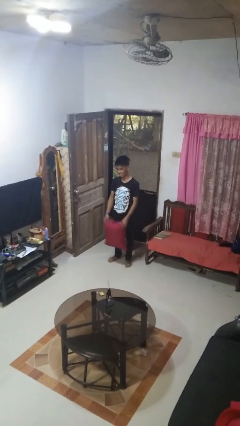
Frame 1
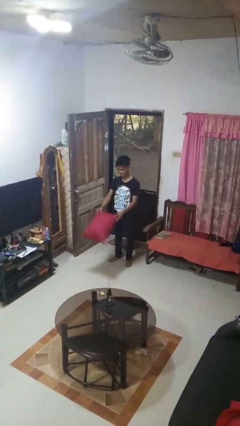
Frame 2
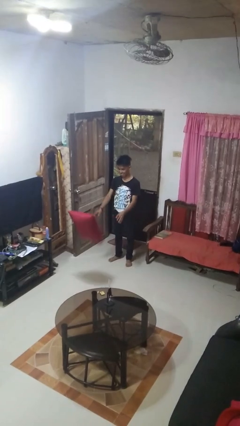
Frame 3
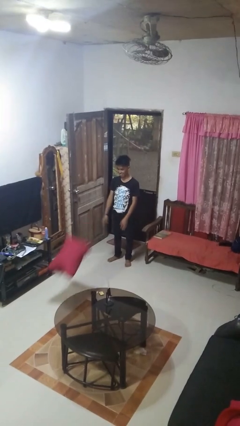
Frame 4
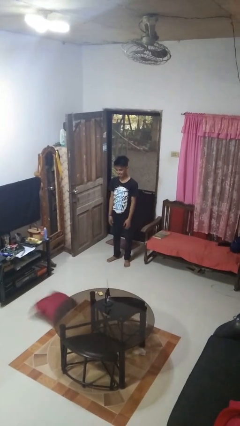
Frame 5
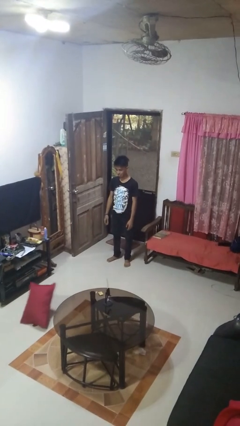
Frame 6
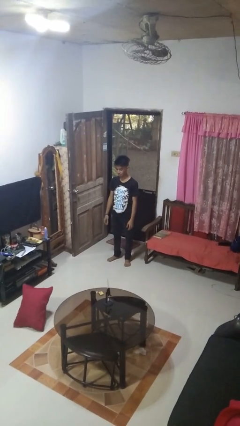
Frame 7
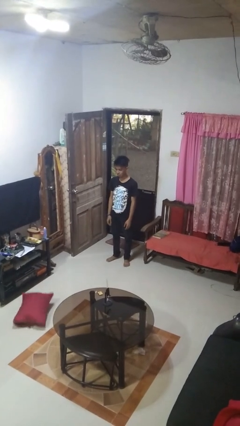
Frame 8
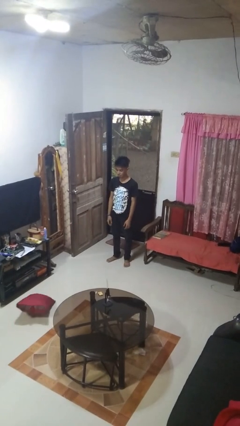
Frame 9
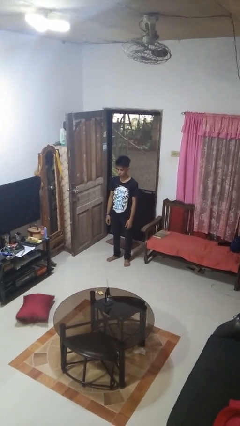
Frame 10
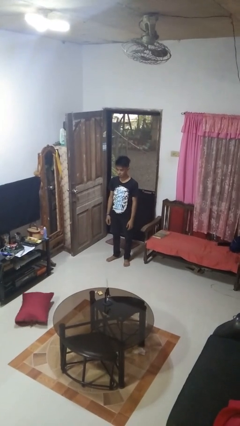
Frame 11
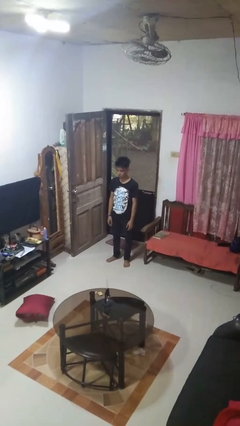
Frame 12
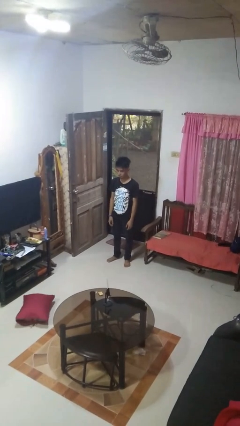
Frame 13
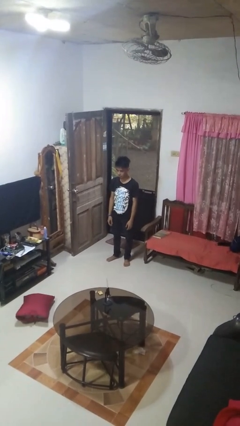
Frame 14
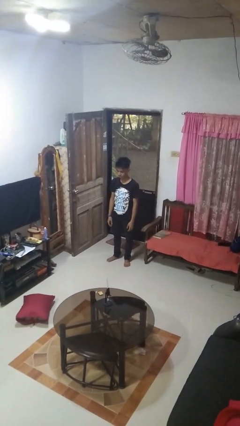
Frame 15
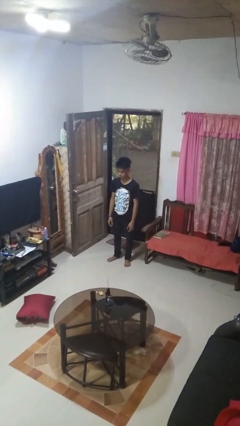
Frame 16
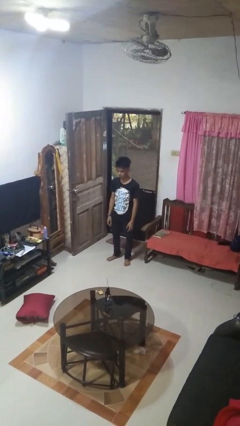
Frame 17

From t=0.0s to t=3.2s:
person throws object to ground

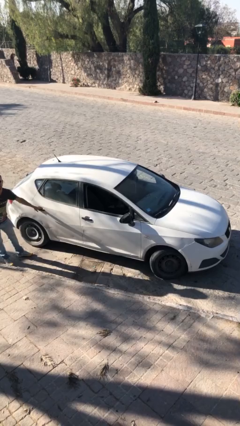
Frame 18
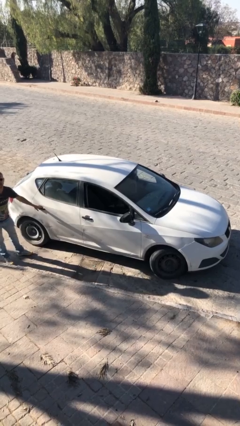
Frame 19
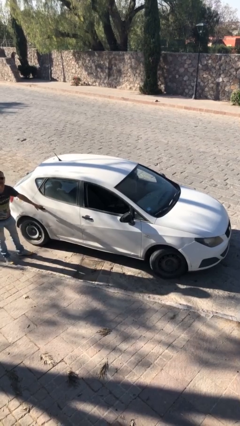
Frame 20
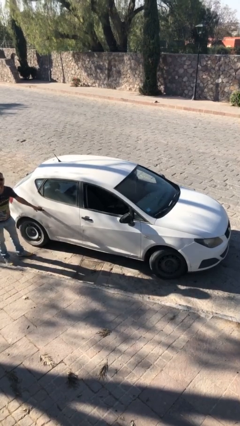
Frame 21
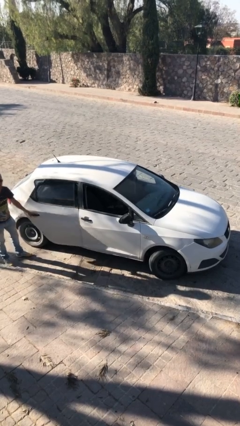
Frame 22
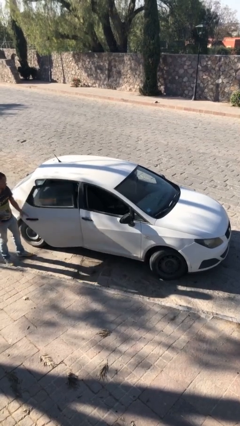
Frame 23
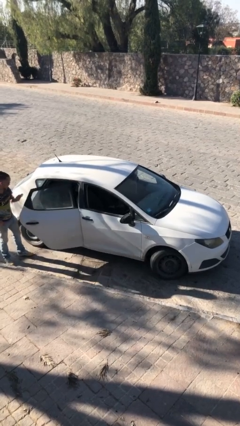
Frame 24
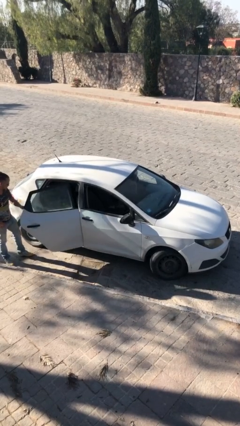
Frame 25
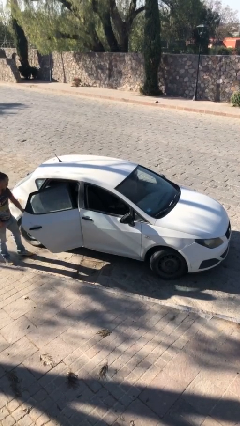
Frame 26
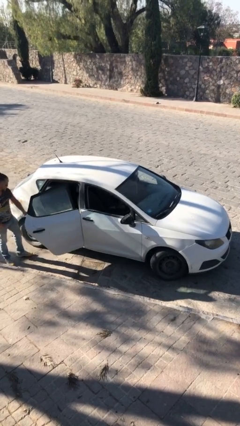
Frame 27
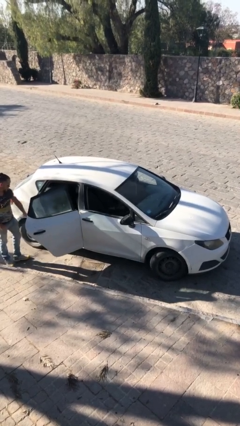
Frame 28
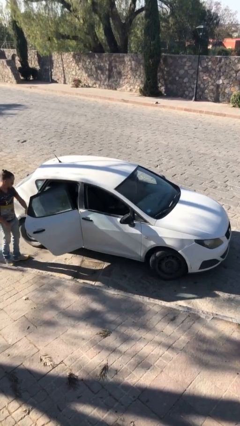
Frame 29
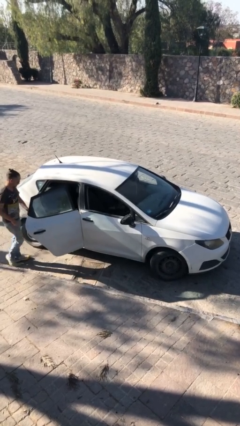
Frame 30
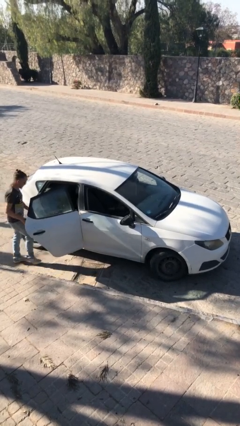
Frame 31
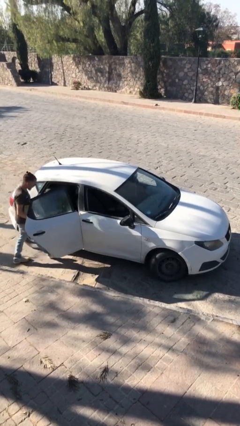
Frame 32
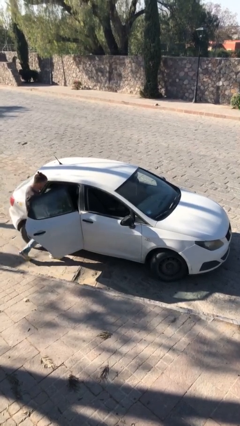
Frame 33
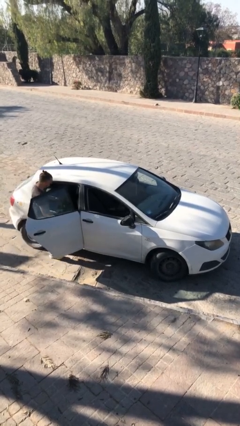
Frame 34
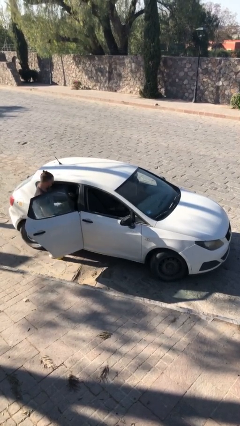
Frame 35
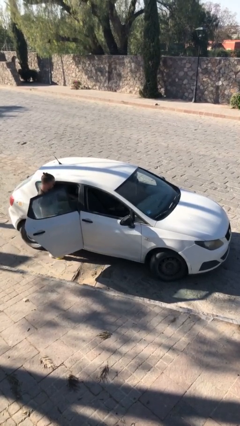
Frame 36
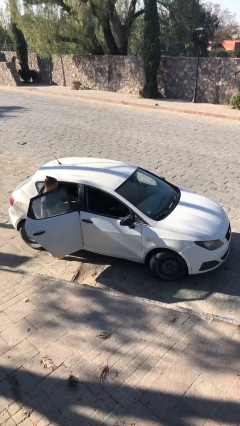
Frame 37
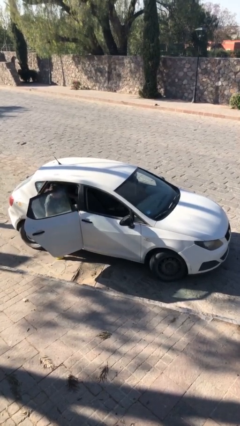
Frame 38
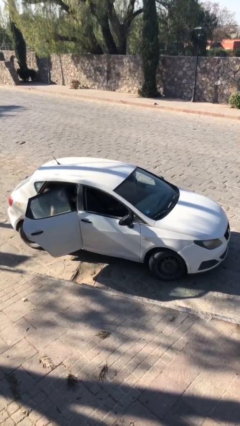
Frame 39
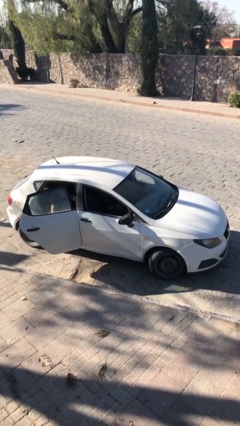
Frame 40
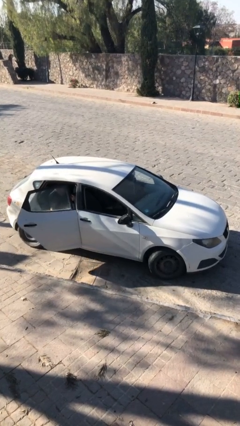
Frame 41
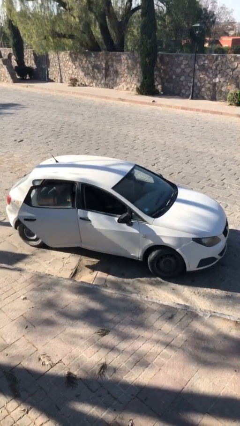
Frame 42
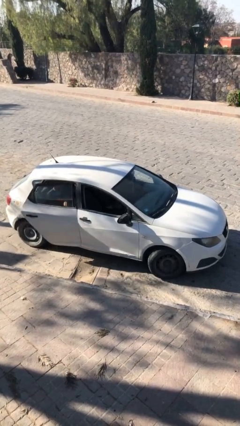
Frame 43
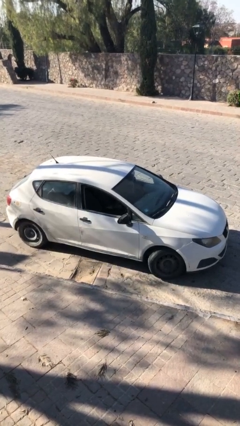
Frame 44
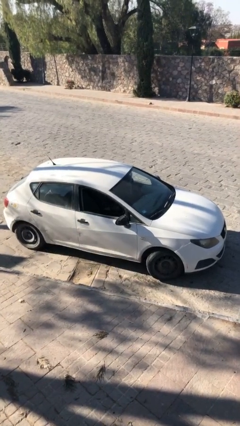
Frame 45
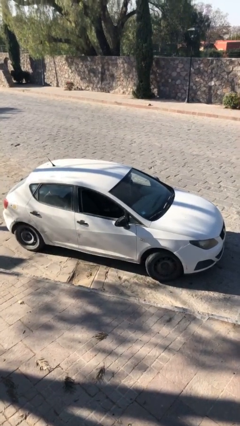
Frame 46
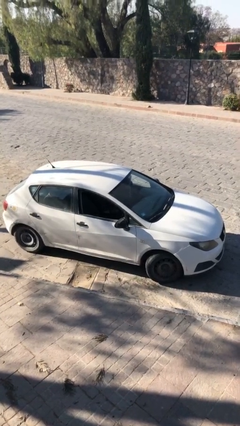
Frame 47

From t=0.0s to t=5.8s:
car picks up person

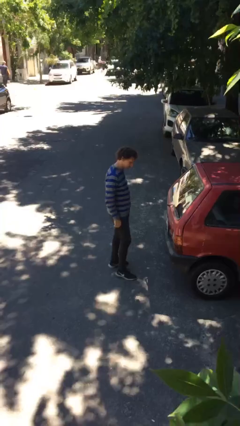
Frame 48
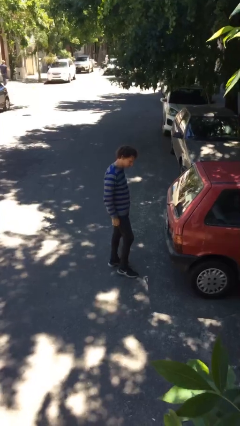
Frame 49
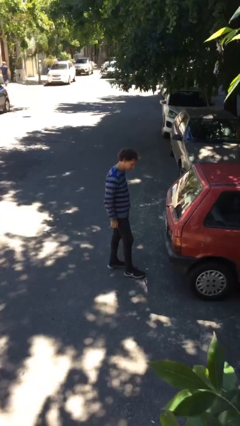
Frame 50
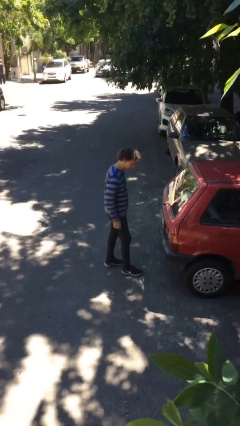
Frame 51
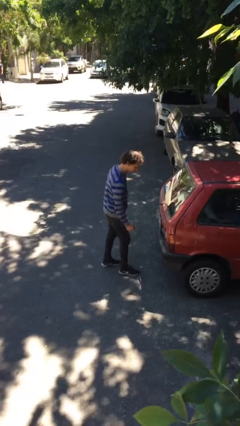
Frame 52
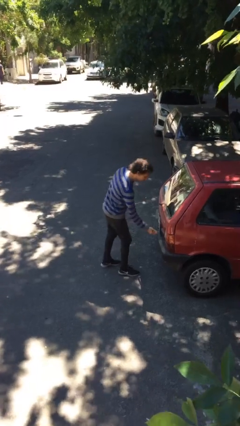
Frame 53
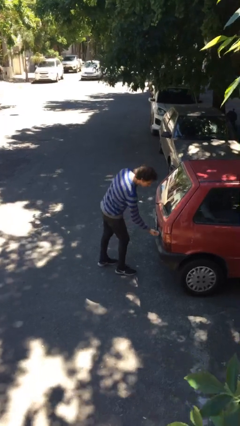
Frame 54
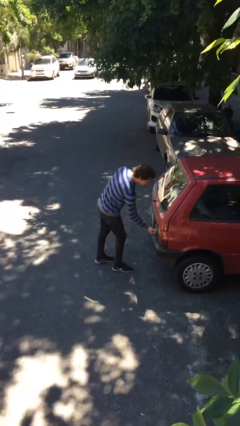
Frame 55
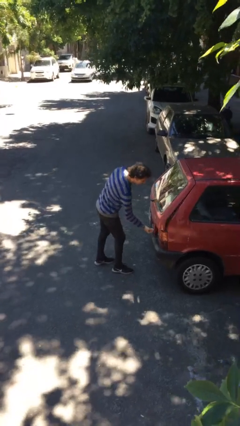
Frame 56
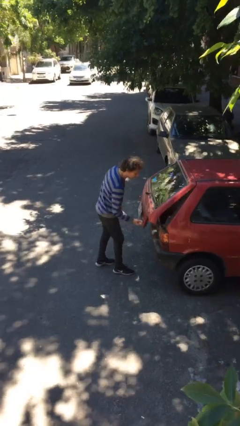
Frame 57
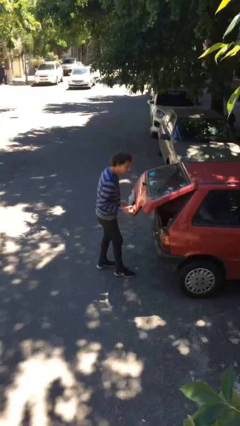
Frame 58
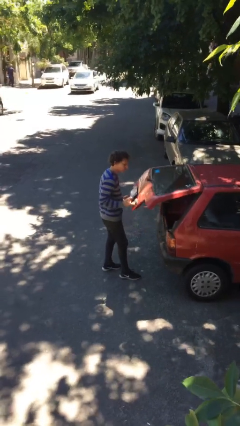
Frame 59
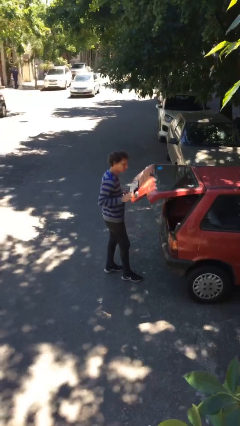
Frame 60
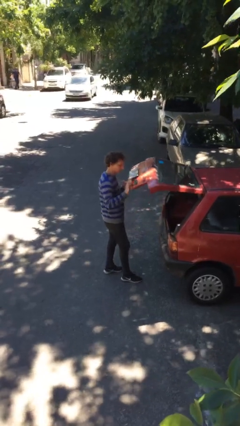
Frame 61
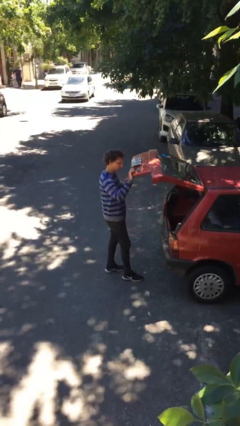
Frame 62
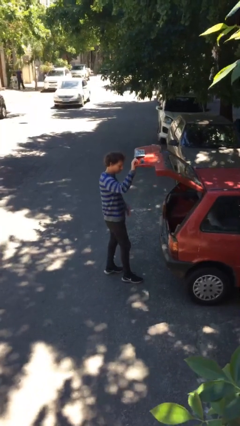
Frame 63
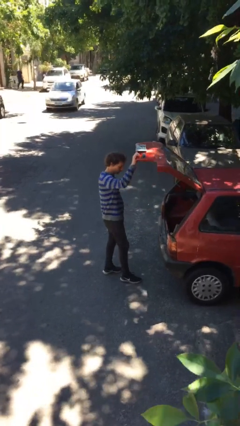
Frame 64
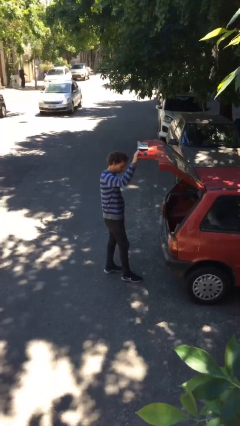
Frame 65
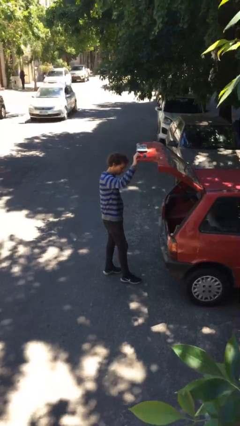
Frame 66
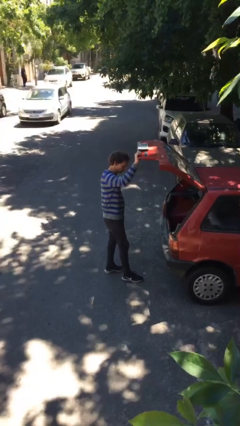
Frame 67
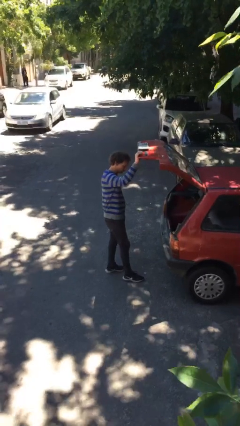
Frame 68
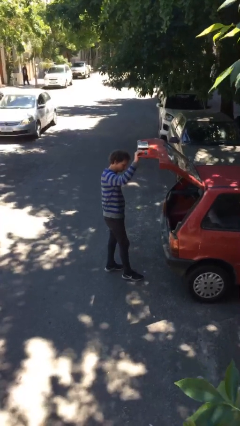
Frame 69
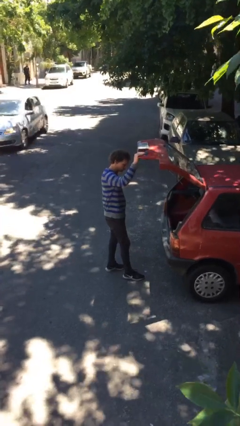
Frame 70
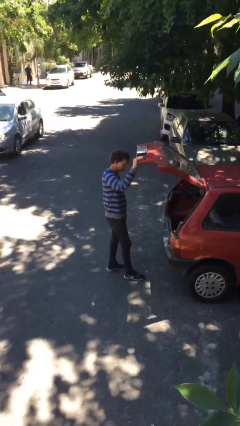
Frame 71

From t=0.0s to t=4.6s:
person opens car trunk

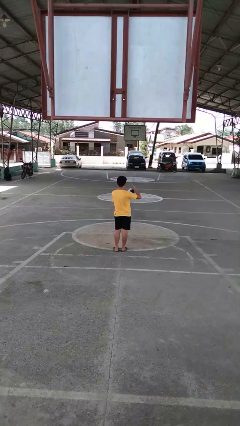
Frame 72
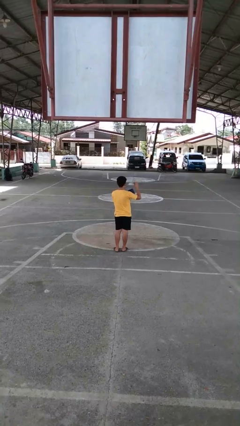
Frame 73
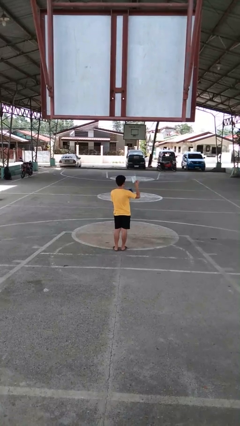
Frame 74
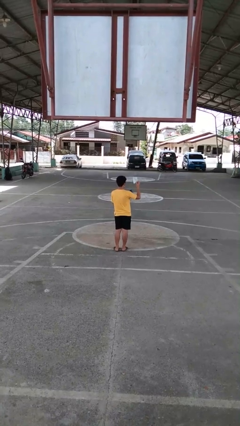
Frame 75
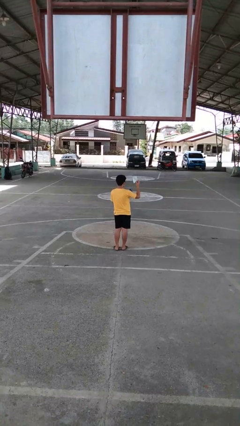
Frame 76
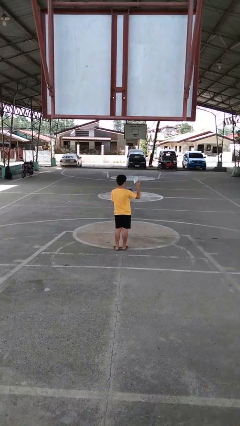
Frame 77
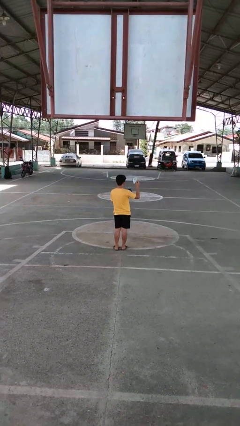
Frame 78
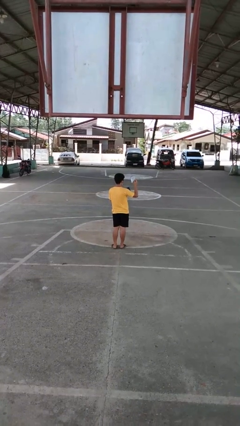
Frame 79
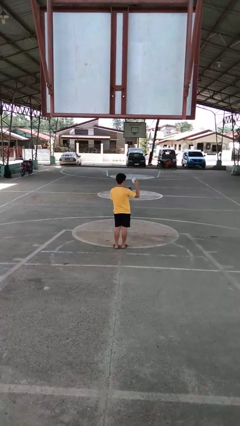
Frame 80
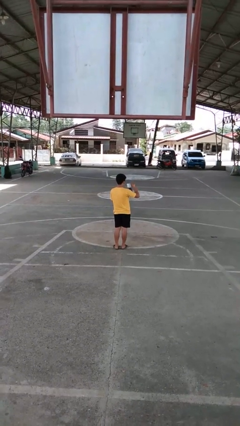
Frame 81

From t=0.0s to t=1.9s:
person takes object from purse

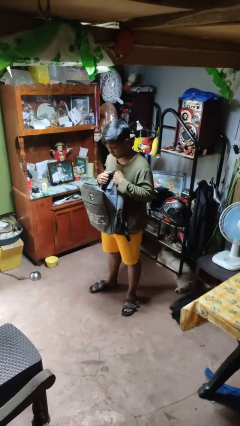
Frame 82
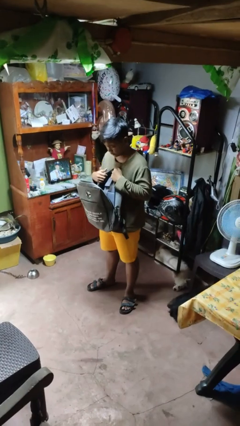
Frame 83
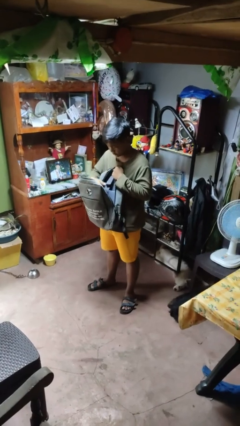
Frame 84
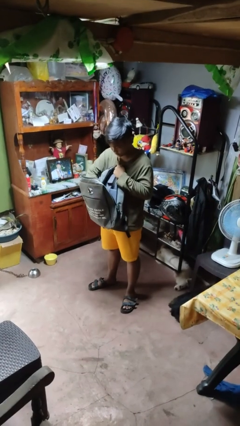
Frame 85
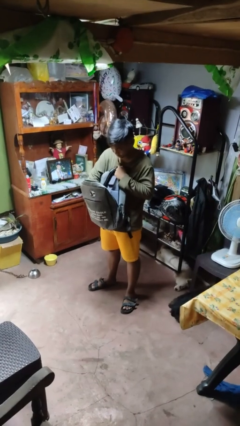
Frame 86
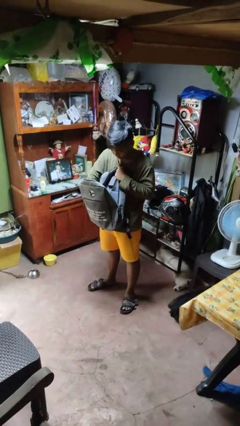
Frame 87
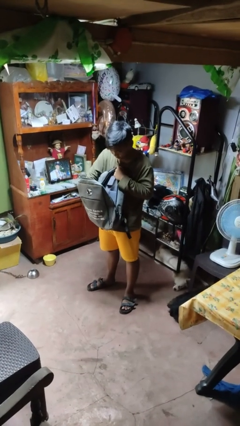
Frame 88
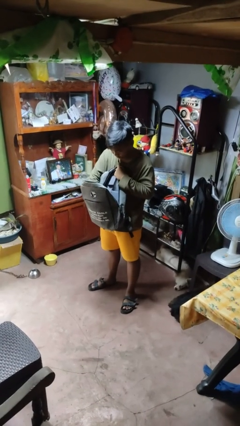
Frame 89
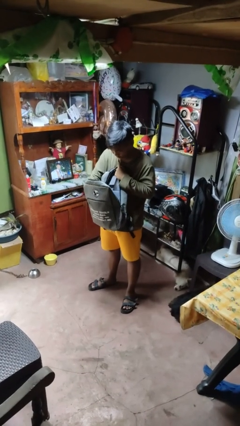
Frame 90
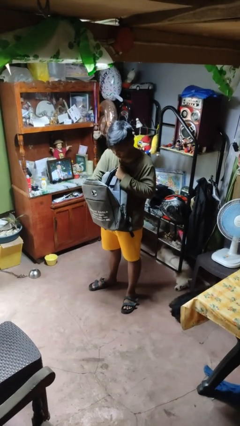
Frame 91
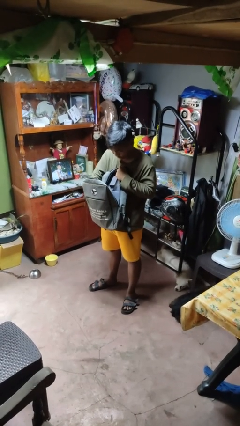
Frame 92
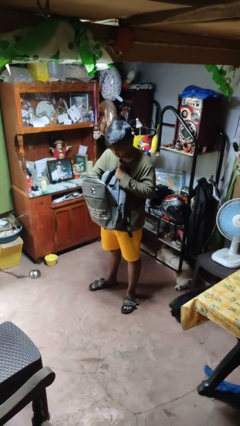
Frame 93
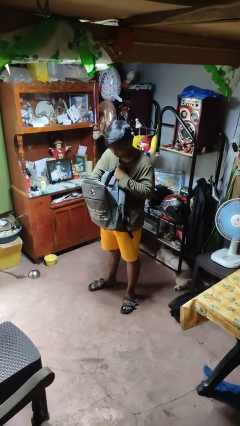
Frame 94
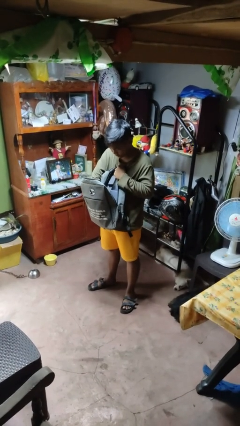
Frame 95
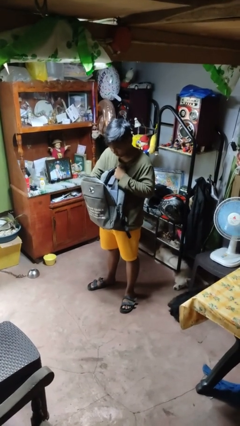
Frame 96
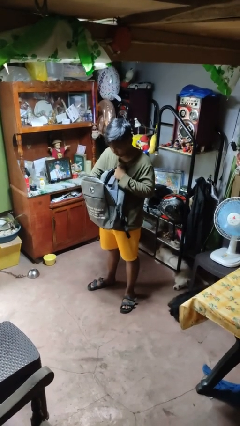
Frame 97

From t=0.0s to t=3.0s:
person searches in backpack
